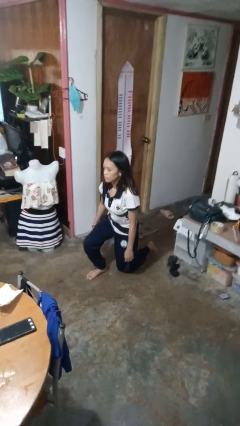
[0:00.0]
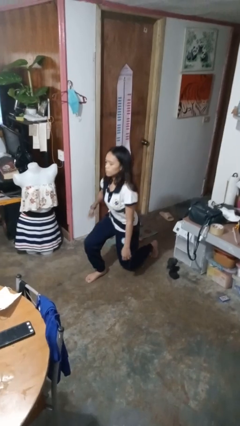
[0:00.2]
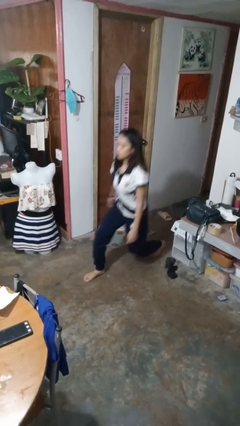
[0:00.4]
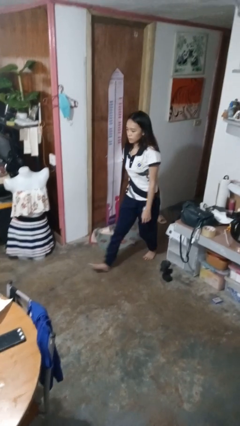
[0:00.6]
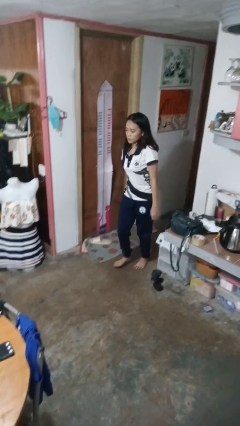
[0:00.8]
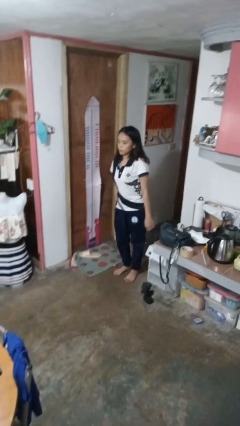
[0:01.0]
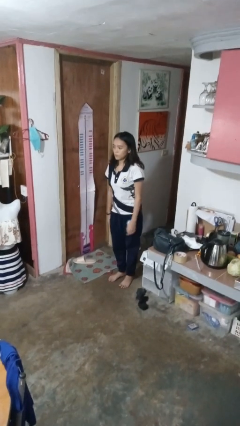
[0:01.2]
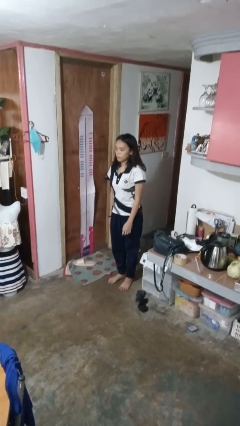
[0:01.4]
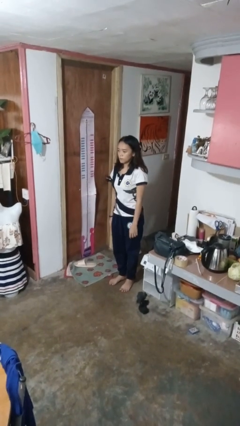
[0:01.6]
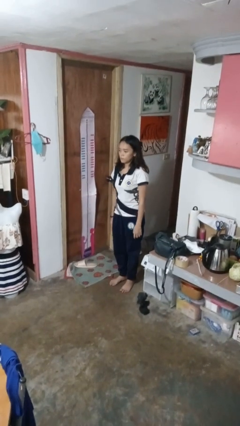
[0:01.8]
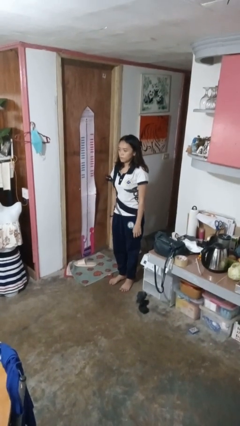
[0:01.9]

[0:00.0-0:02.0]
person stands up from floor

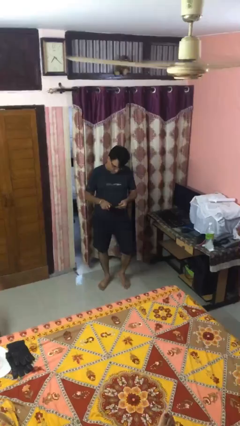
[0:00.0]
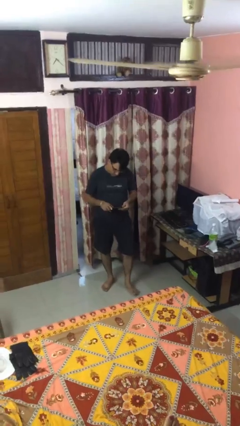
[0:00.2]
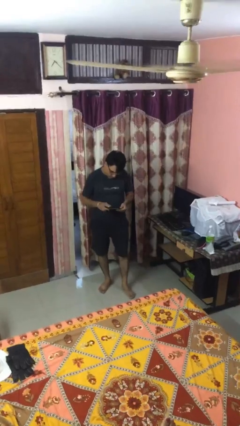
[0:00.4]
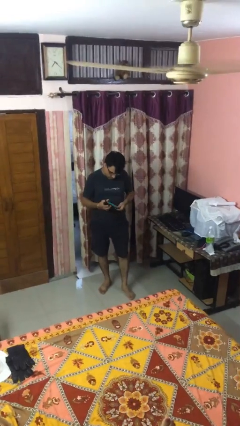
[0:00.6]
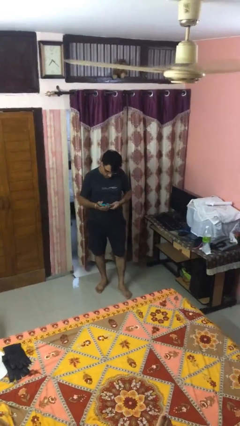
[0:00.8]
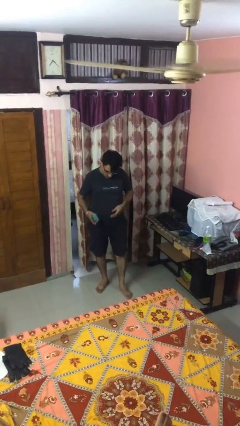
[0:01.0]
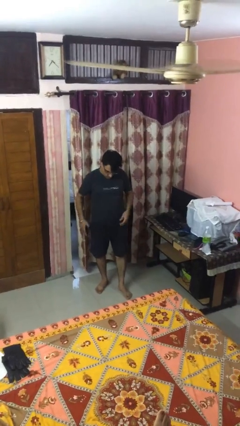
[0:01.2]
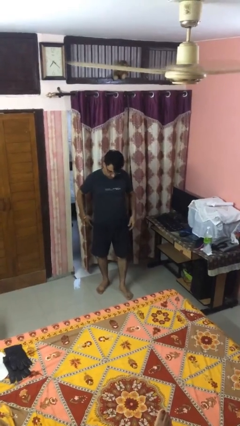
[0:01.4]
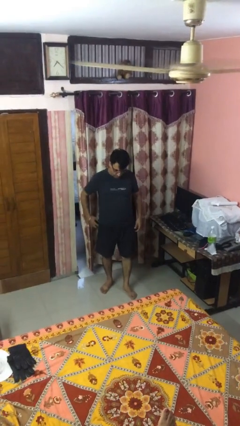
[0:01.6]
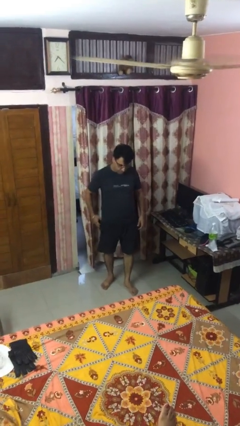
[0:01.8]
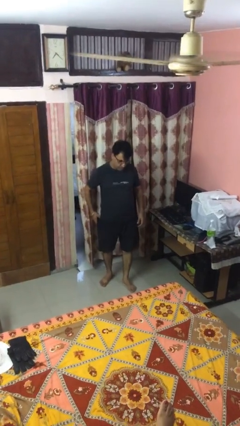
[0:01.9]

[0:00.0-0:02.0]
person puts phone into pocket

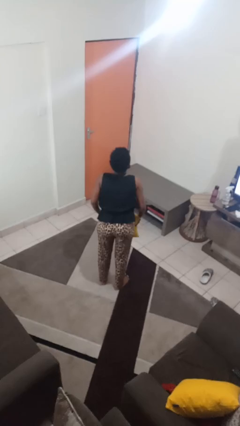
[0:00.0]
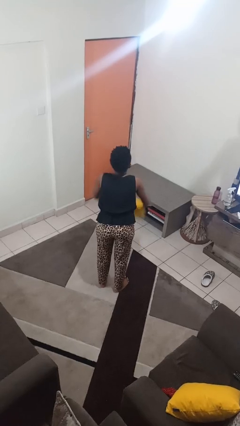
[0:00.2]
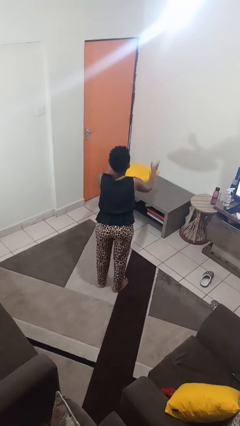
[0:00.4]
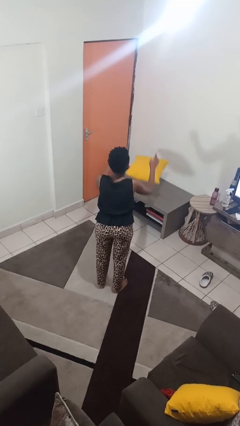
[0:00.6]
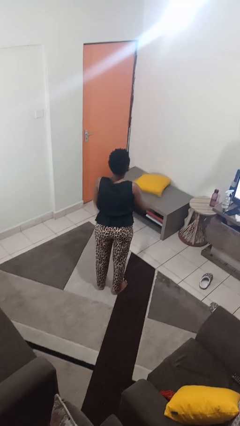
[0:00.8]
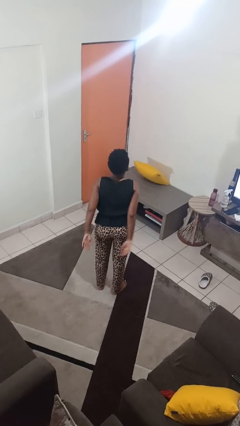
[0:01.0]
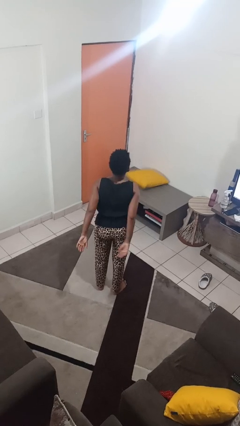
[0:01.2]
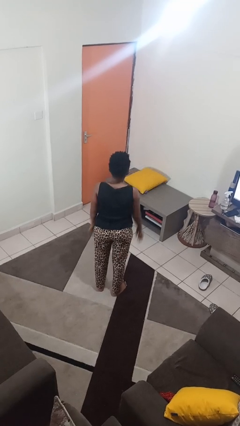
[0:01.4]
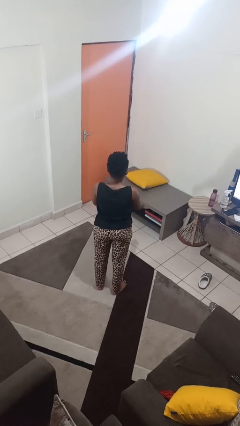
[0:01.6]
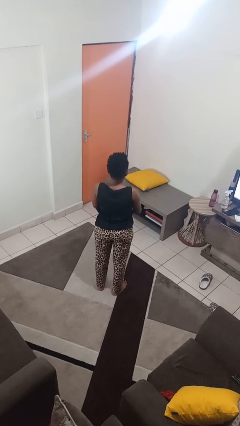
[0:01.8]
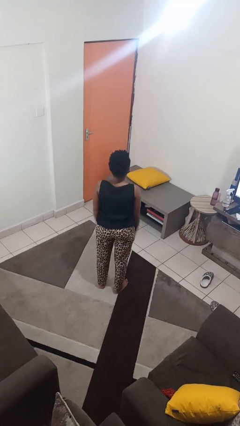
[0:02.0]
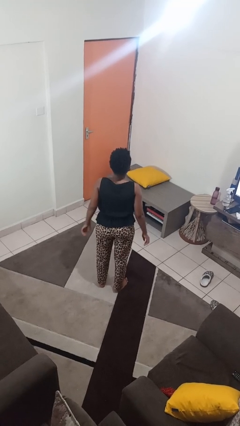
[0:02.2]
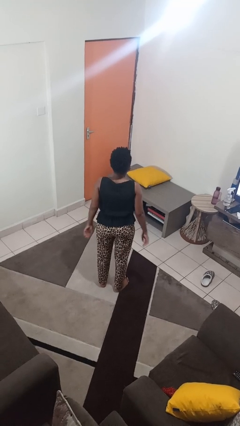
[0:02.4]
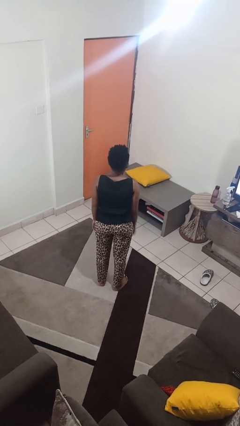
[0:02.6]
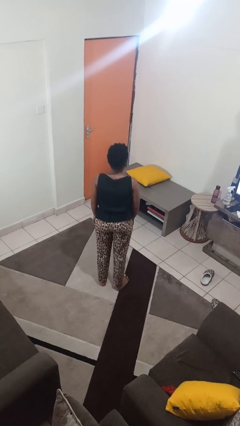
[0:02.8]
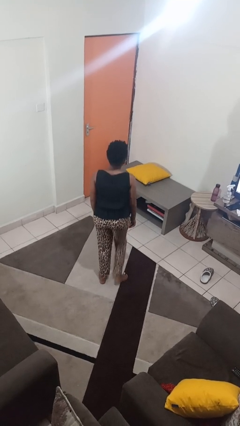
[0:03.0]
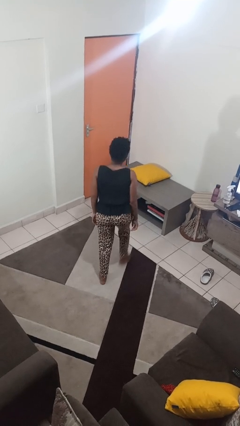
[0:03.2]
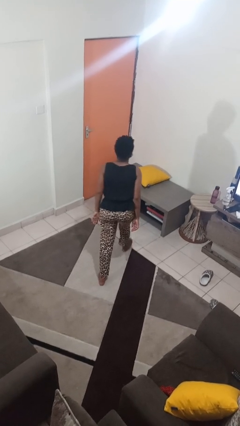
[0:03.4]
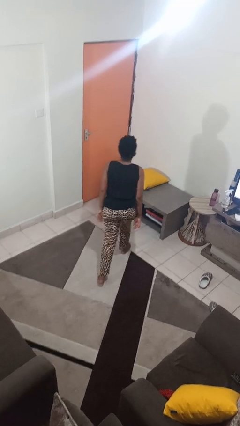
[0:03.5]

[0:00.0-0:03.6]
person throws object on table

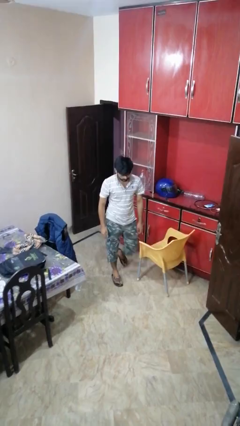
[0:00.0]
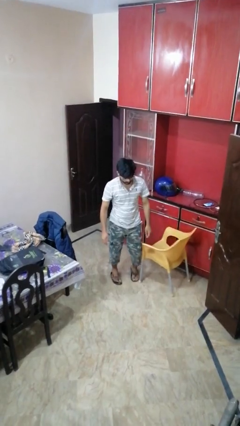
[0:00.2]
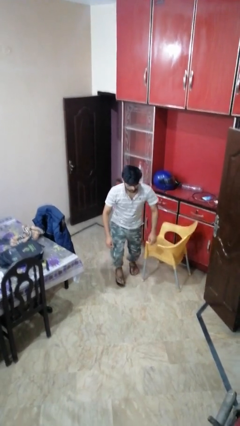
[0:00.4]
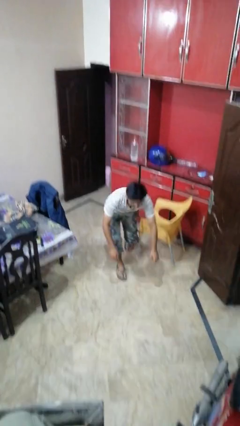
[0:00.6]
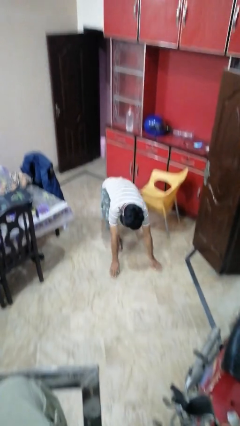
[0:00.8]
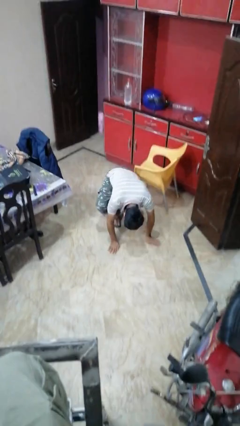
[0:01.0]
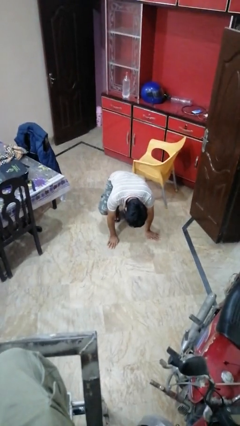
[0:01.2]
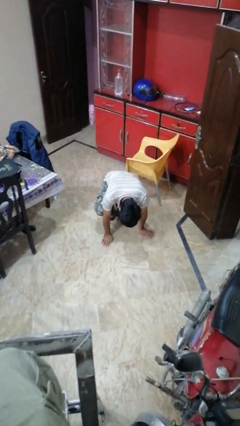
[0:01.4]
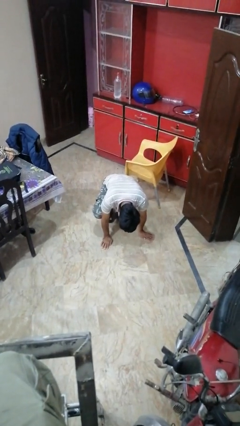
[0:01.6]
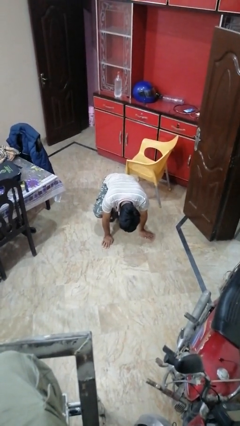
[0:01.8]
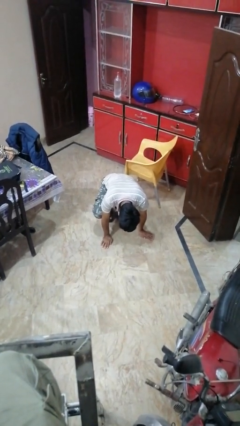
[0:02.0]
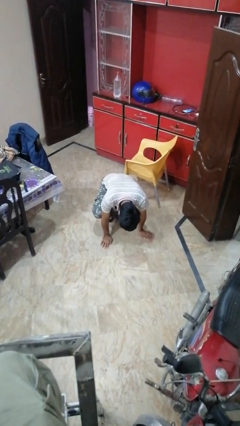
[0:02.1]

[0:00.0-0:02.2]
person trips on object on floor

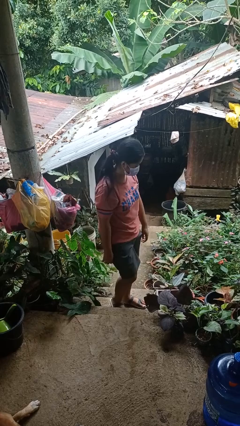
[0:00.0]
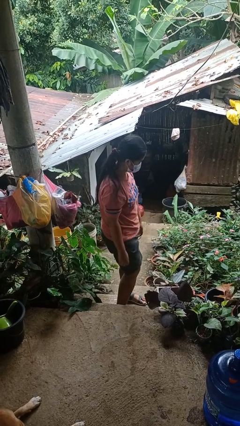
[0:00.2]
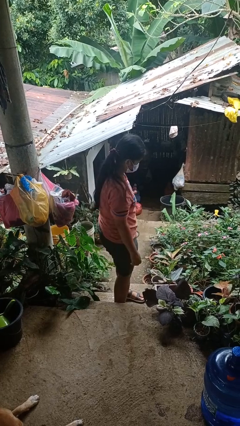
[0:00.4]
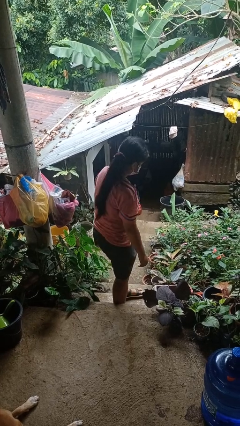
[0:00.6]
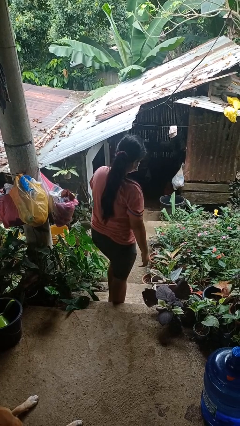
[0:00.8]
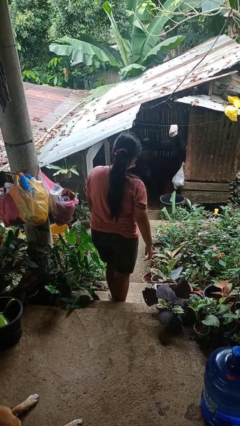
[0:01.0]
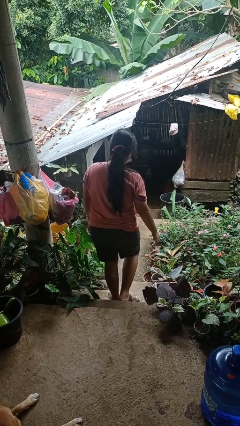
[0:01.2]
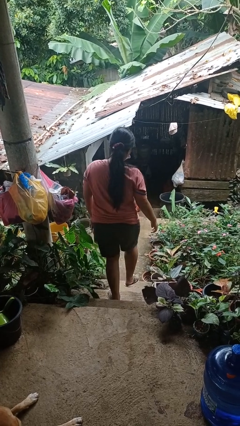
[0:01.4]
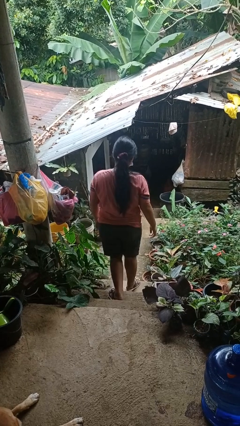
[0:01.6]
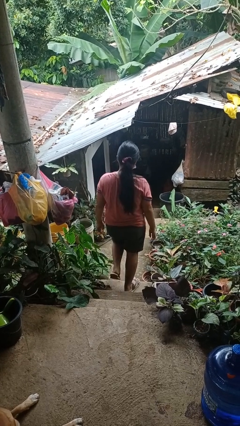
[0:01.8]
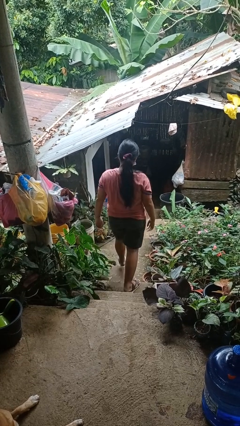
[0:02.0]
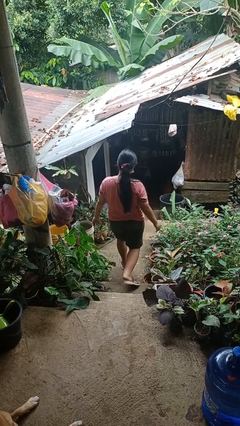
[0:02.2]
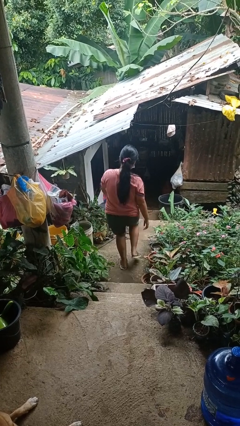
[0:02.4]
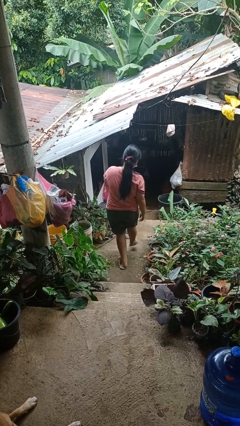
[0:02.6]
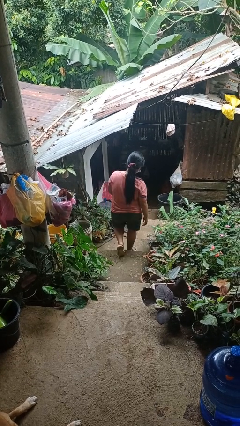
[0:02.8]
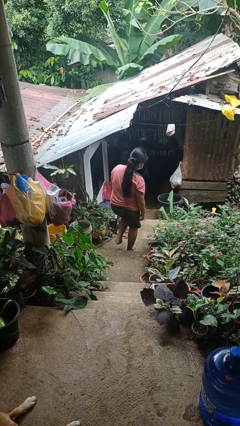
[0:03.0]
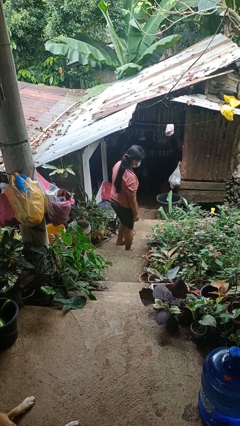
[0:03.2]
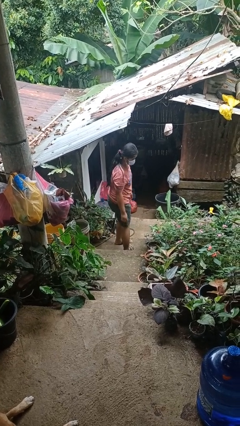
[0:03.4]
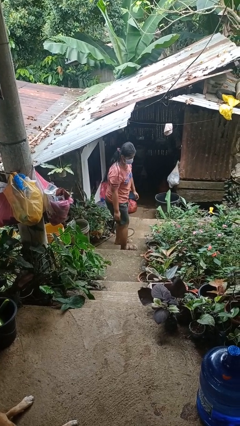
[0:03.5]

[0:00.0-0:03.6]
person climbs down stairs

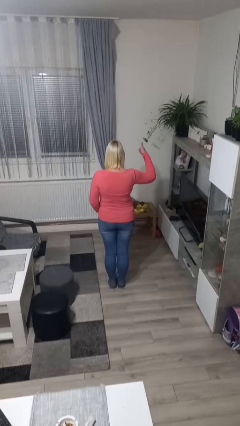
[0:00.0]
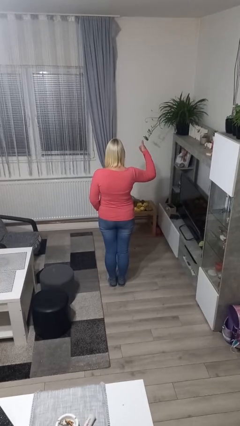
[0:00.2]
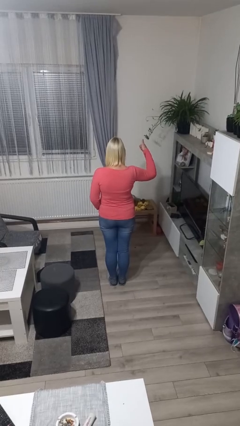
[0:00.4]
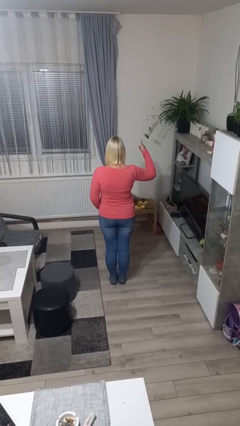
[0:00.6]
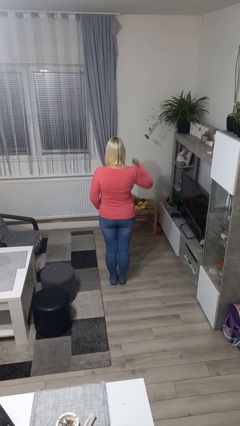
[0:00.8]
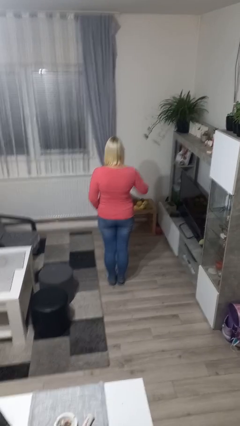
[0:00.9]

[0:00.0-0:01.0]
person gestures number one

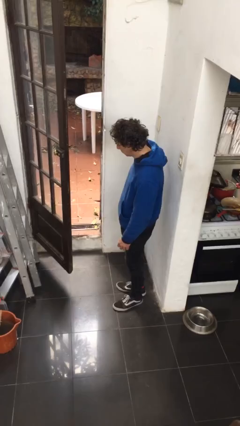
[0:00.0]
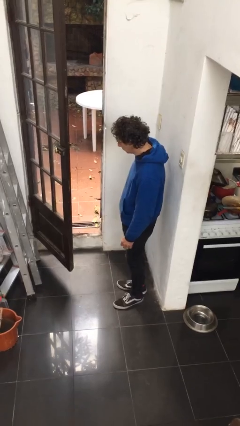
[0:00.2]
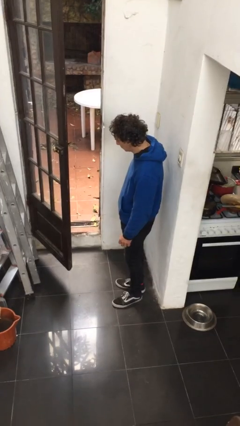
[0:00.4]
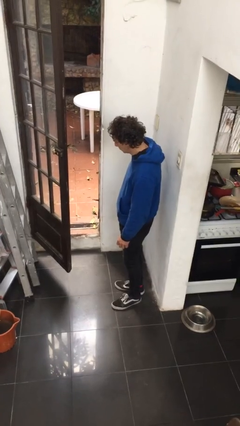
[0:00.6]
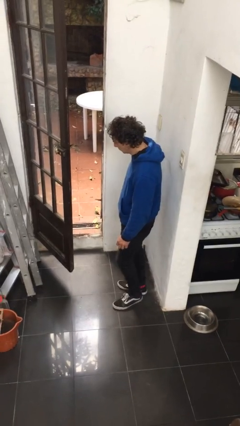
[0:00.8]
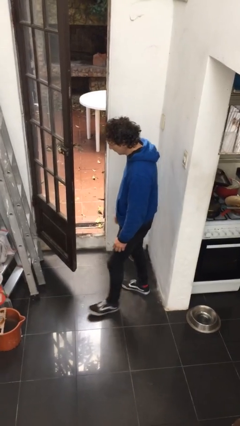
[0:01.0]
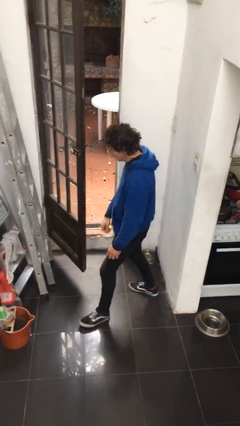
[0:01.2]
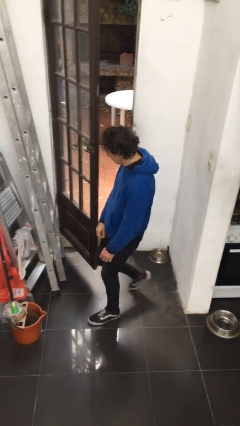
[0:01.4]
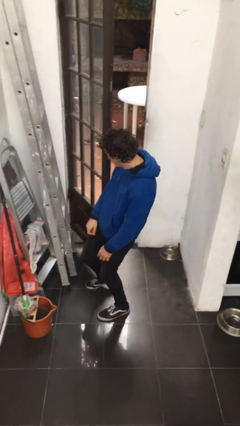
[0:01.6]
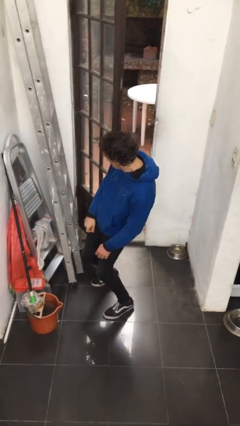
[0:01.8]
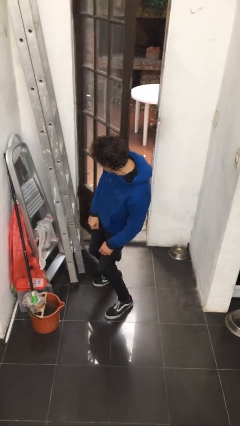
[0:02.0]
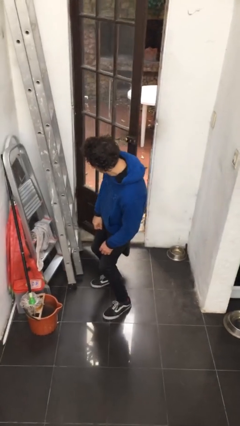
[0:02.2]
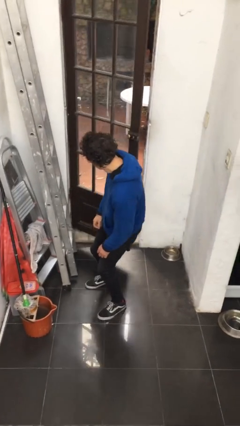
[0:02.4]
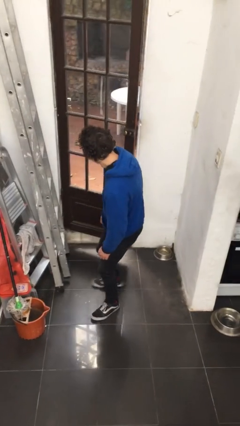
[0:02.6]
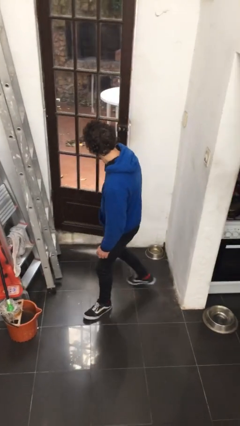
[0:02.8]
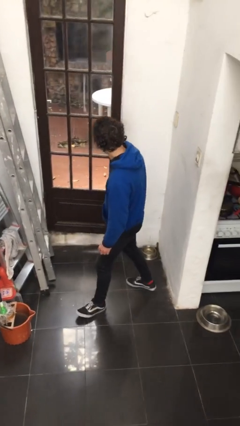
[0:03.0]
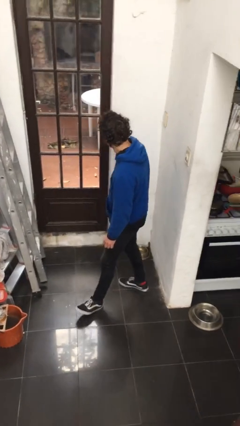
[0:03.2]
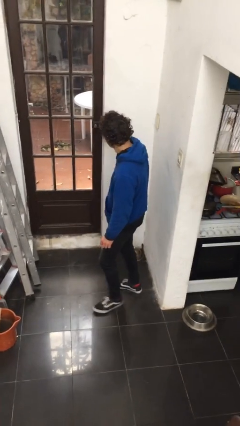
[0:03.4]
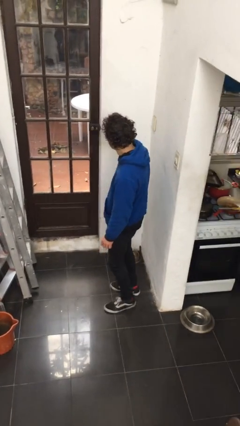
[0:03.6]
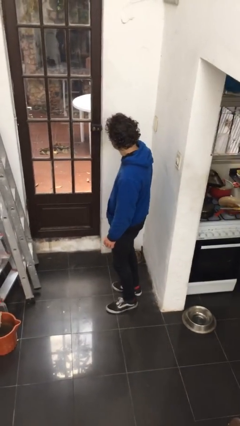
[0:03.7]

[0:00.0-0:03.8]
person closes door with hip
